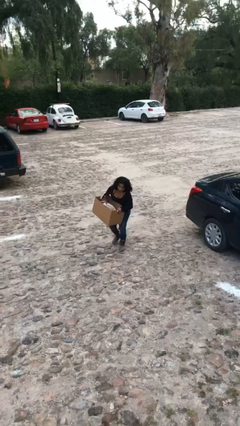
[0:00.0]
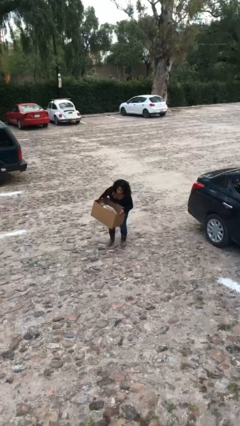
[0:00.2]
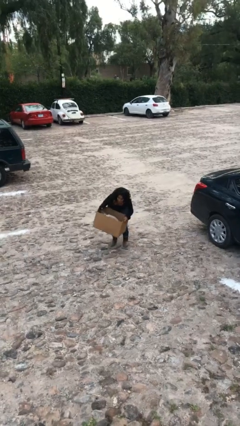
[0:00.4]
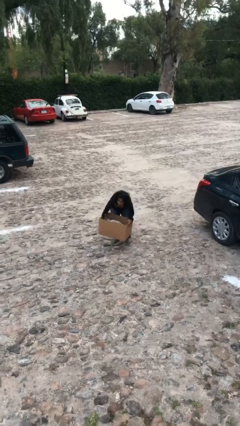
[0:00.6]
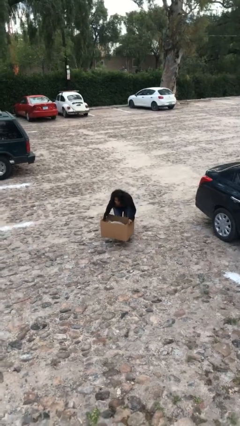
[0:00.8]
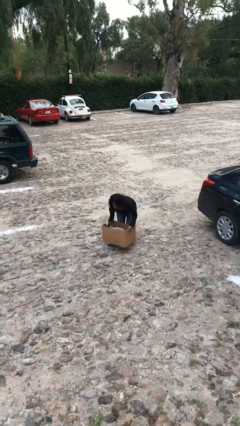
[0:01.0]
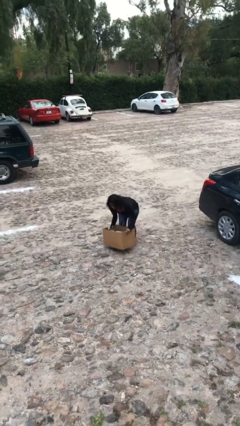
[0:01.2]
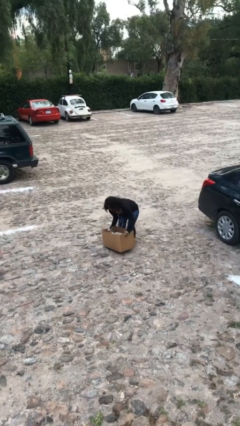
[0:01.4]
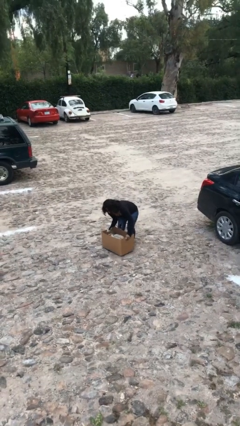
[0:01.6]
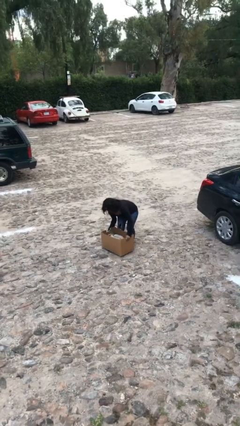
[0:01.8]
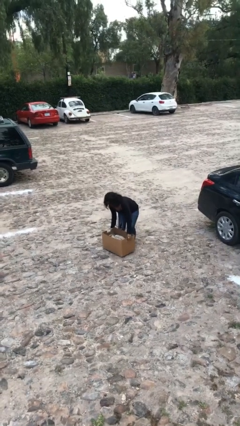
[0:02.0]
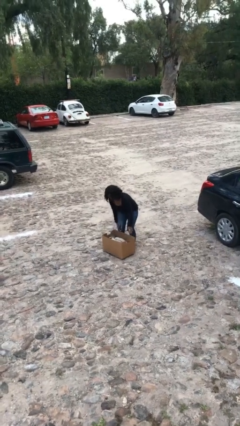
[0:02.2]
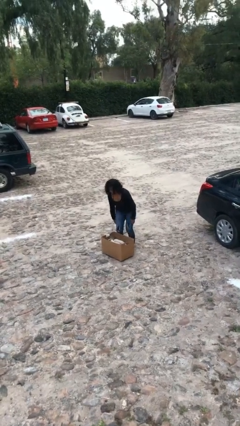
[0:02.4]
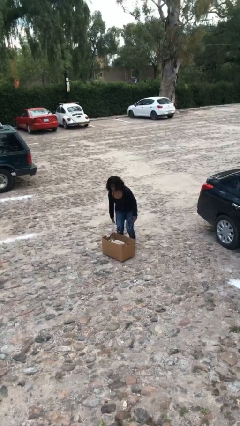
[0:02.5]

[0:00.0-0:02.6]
person puts down object on floor

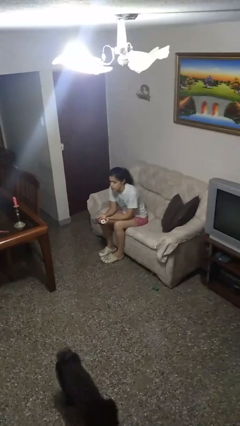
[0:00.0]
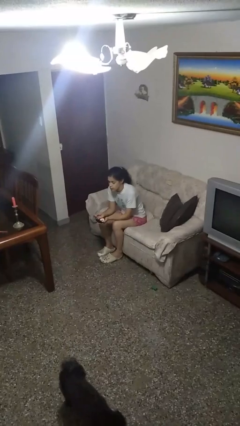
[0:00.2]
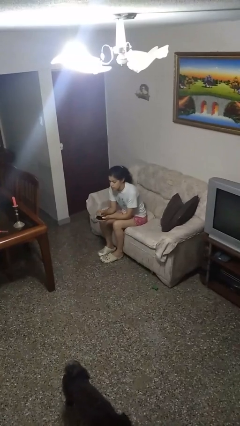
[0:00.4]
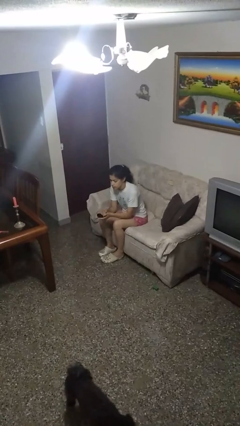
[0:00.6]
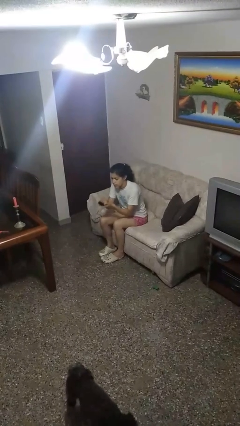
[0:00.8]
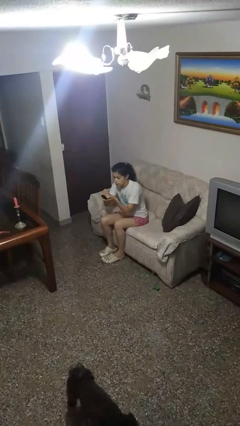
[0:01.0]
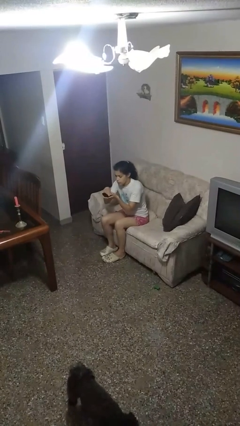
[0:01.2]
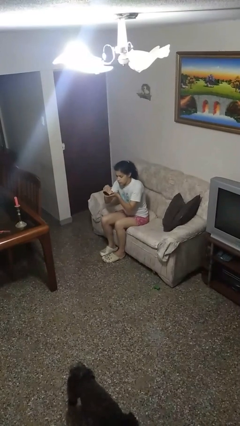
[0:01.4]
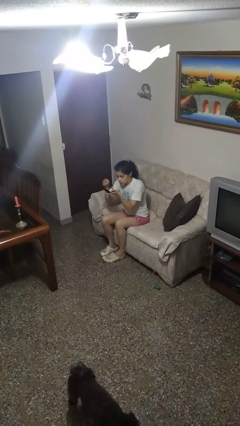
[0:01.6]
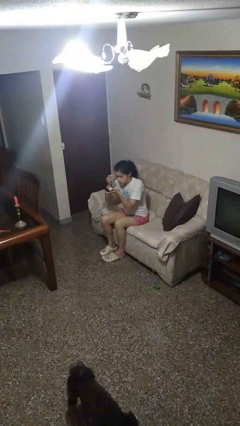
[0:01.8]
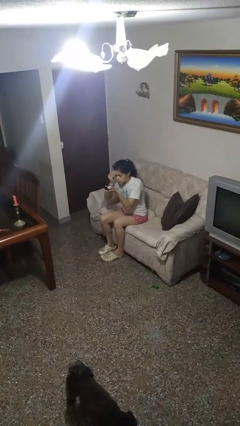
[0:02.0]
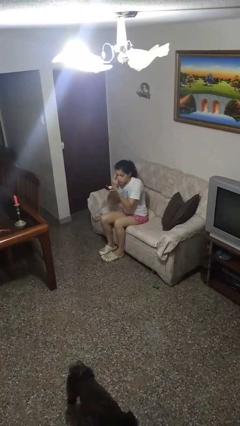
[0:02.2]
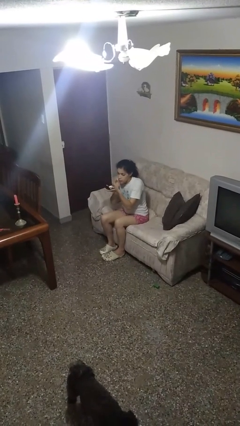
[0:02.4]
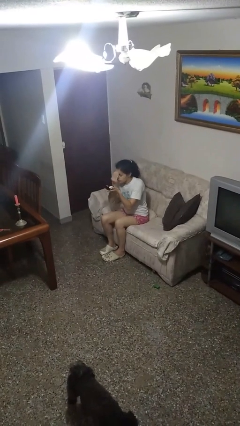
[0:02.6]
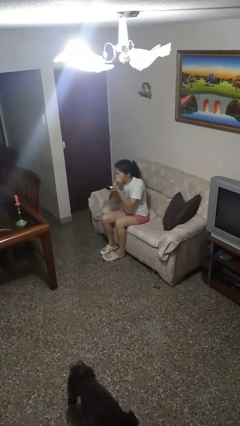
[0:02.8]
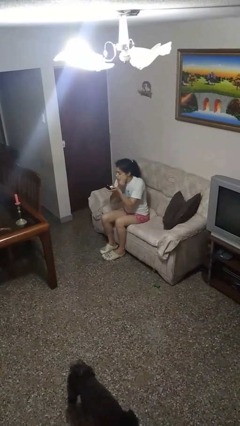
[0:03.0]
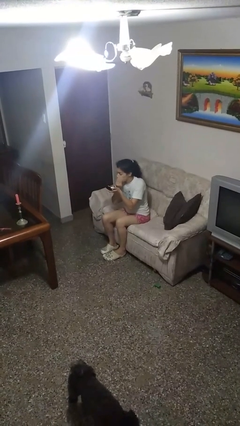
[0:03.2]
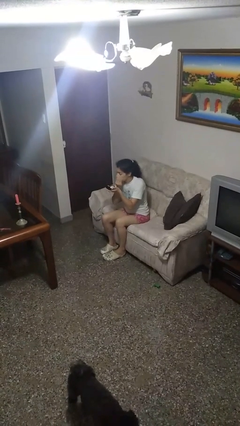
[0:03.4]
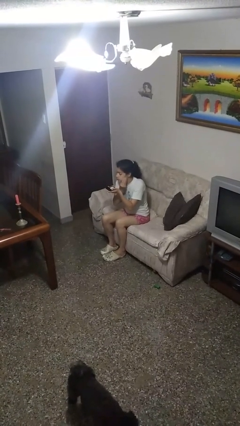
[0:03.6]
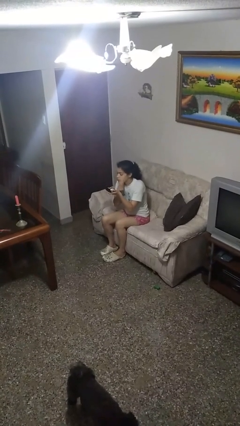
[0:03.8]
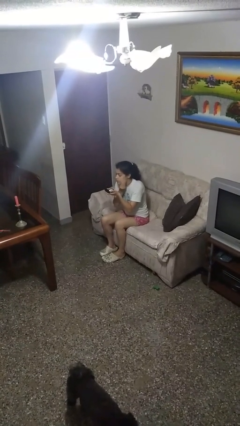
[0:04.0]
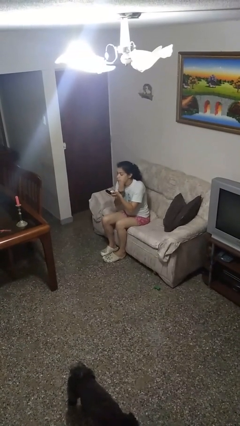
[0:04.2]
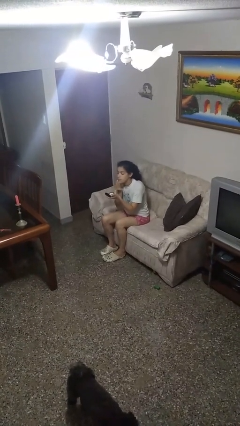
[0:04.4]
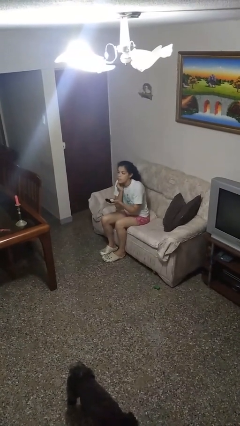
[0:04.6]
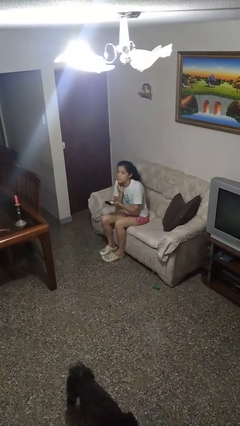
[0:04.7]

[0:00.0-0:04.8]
person applies foundation makeup

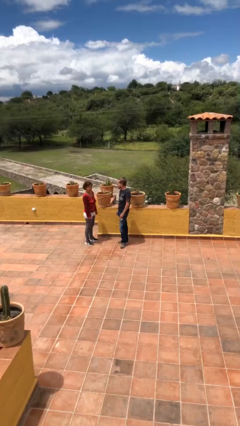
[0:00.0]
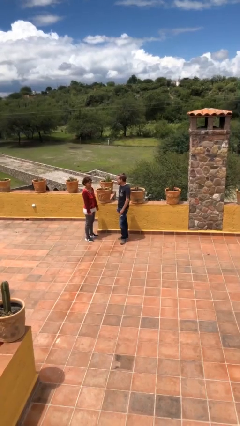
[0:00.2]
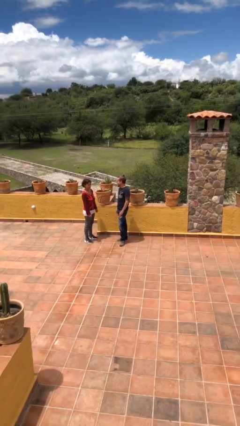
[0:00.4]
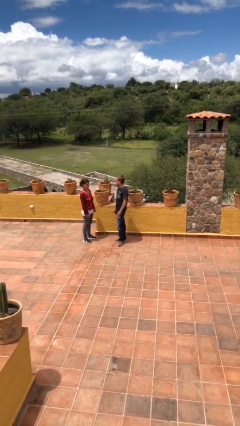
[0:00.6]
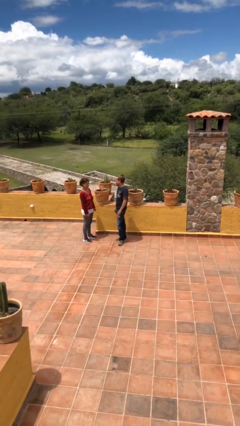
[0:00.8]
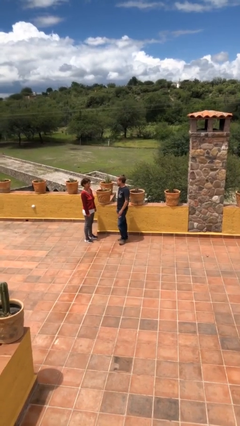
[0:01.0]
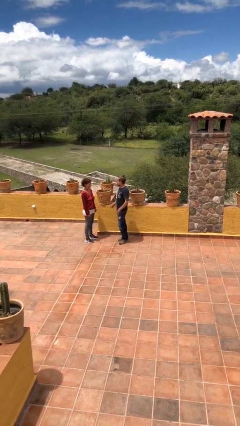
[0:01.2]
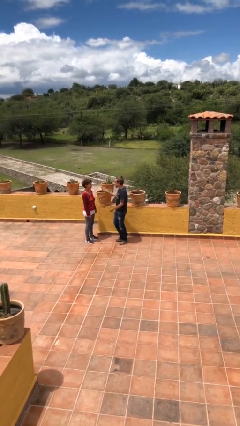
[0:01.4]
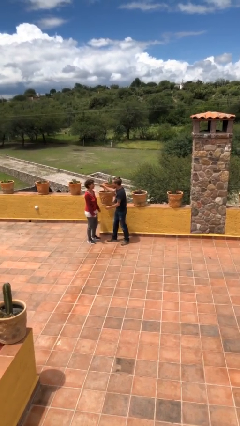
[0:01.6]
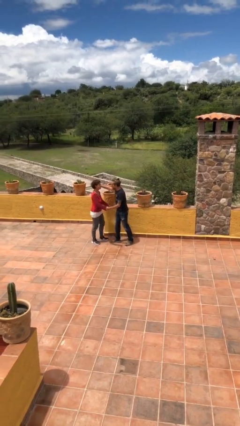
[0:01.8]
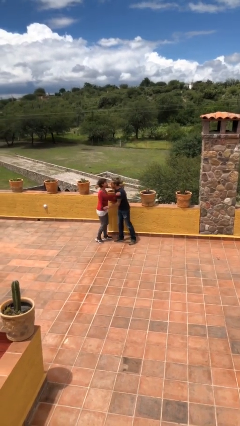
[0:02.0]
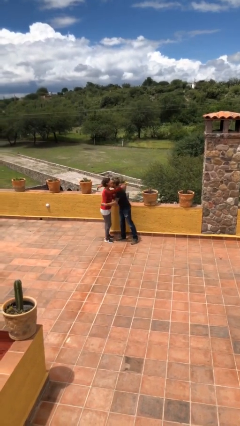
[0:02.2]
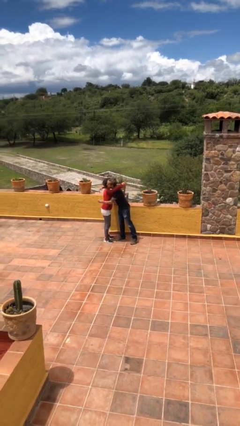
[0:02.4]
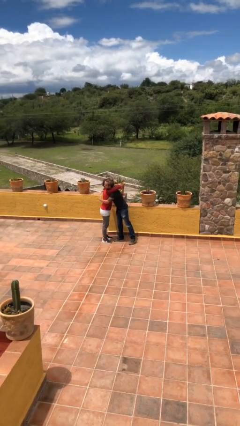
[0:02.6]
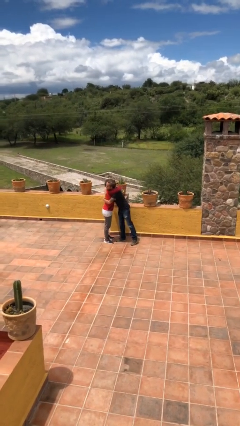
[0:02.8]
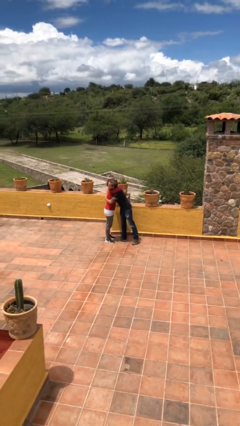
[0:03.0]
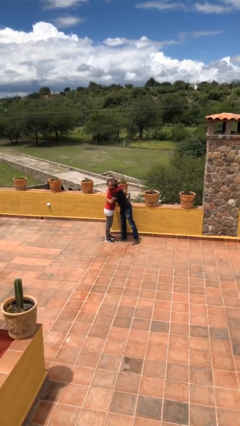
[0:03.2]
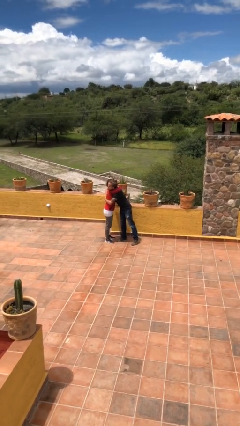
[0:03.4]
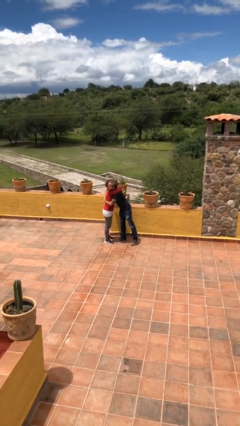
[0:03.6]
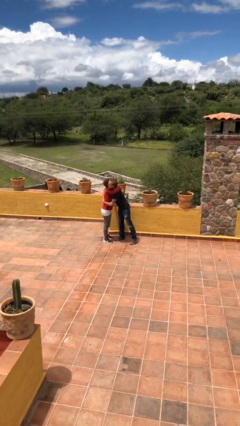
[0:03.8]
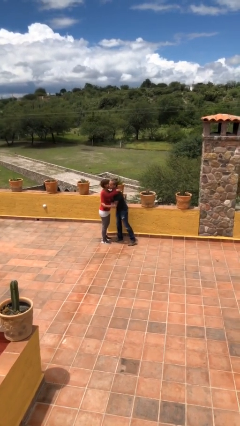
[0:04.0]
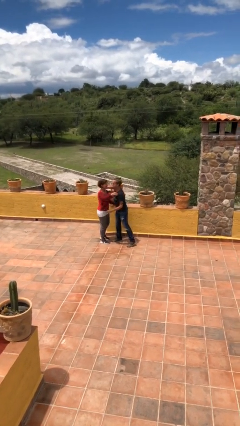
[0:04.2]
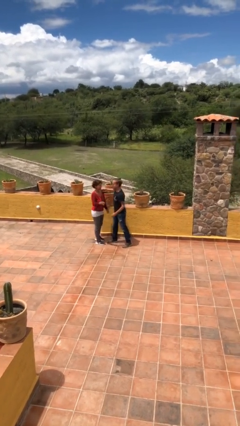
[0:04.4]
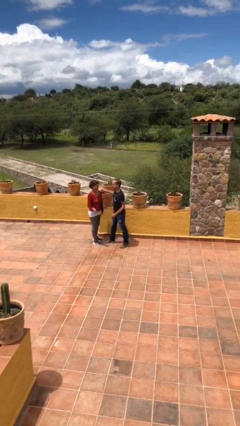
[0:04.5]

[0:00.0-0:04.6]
person embraces person

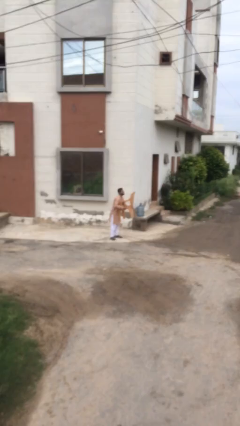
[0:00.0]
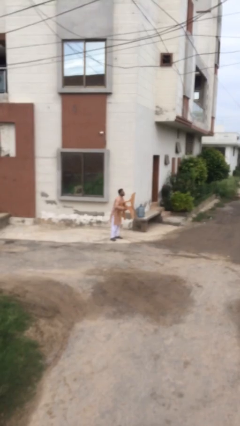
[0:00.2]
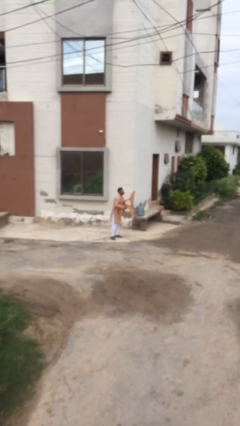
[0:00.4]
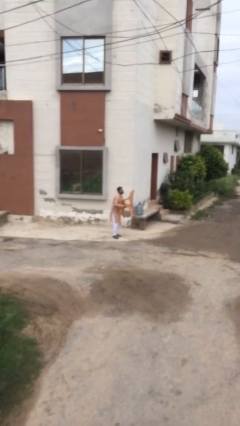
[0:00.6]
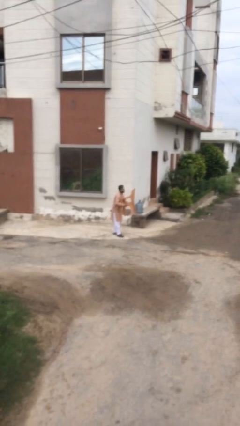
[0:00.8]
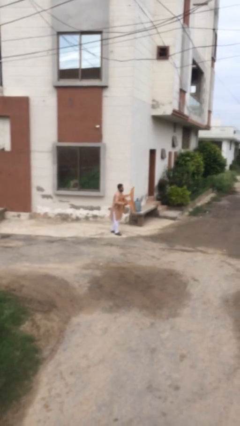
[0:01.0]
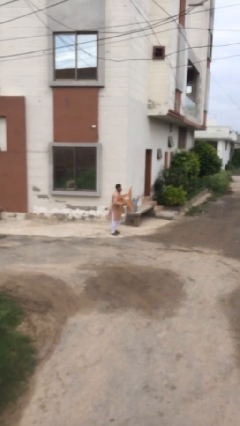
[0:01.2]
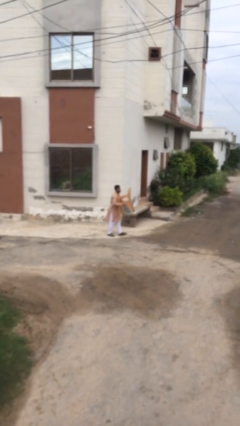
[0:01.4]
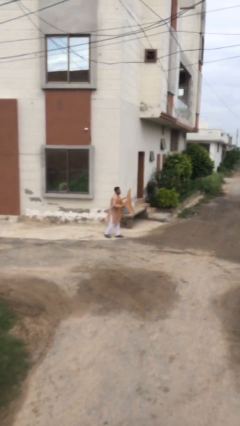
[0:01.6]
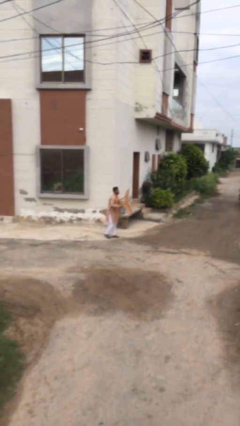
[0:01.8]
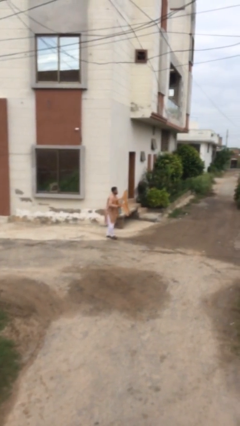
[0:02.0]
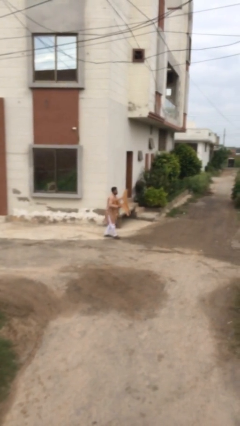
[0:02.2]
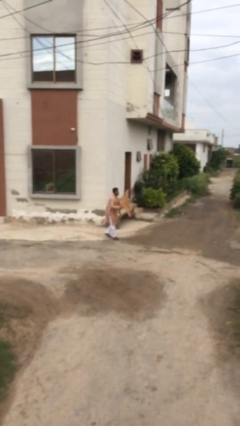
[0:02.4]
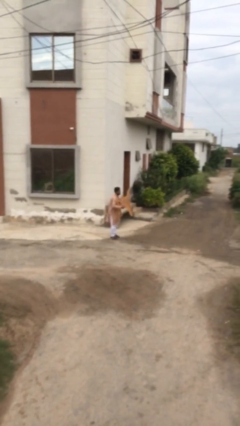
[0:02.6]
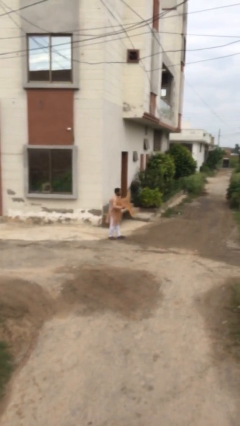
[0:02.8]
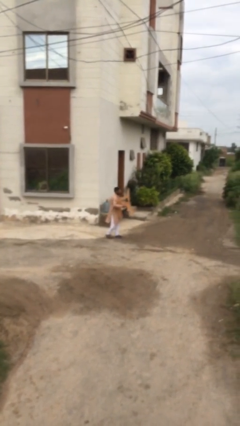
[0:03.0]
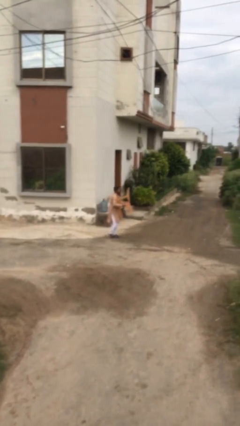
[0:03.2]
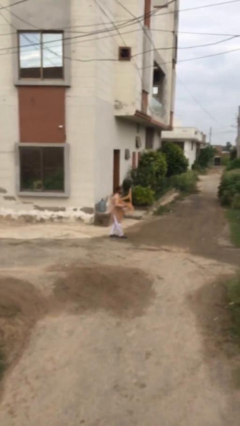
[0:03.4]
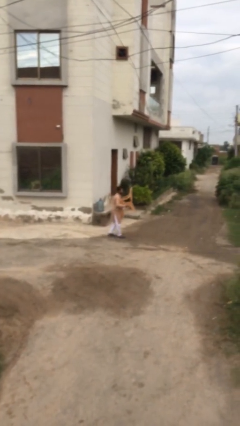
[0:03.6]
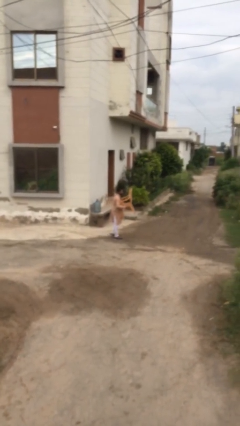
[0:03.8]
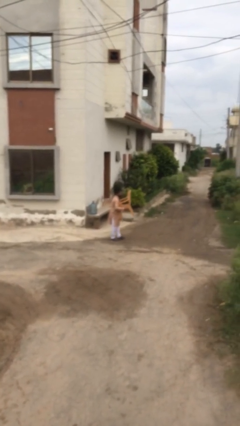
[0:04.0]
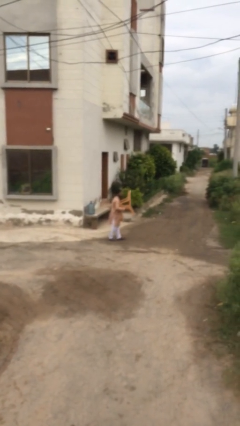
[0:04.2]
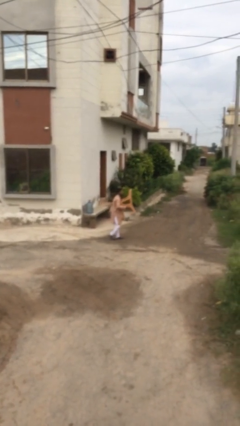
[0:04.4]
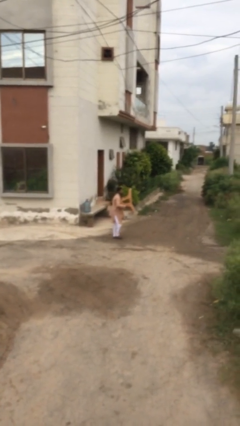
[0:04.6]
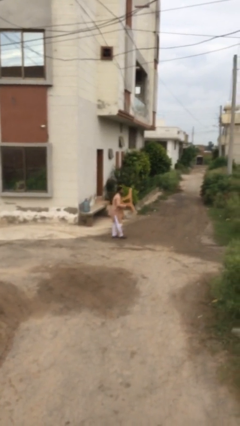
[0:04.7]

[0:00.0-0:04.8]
person carries heavy object

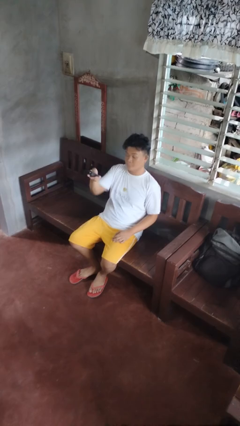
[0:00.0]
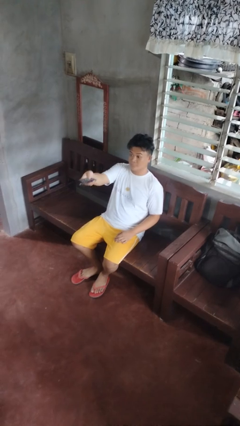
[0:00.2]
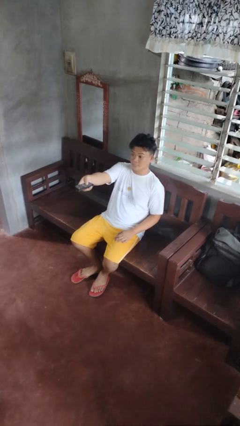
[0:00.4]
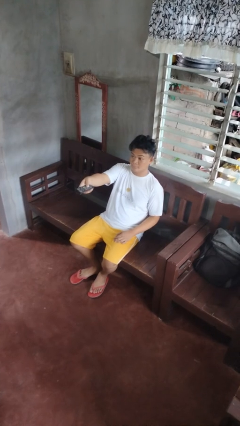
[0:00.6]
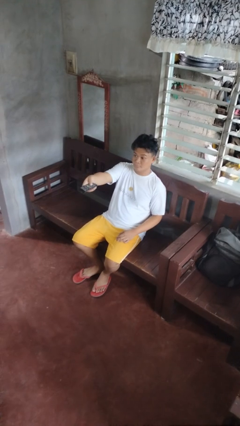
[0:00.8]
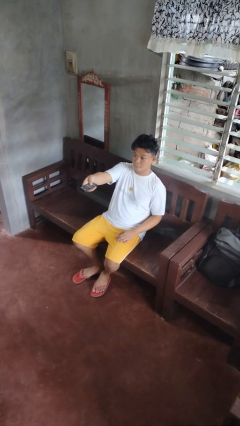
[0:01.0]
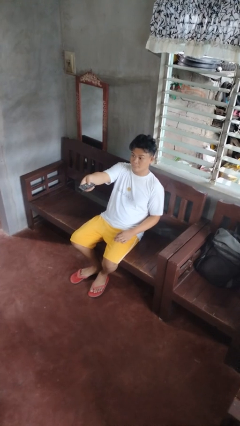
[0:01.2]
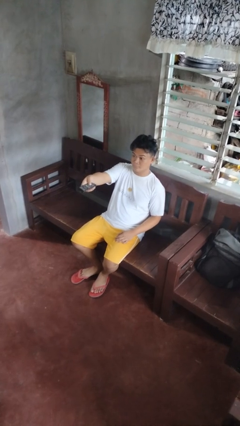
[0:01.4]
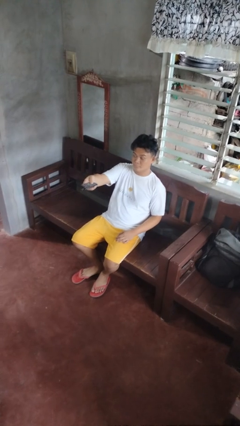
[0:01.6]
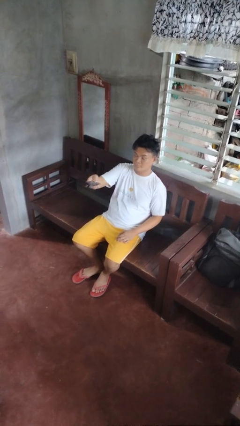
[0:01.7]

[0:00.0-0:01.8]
person uses television remote
